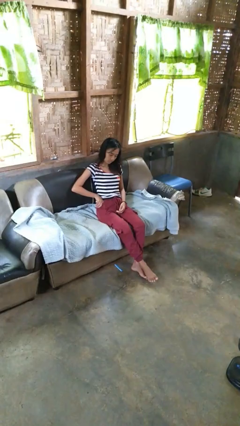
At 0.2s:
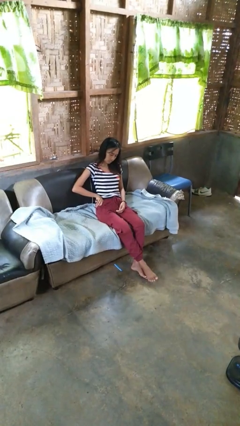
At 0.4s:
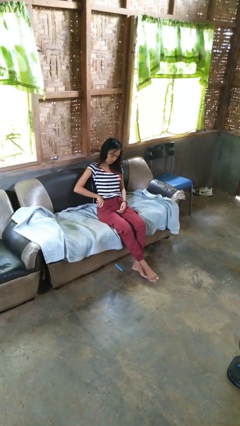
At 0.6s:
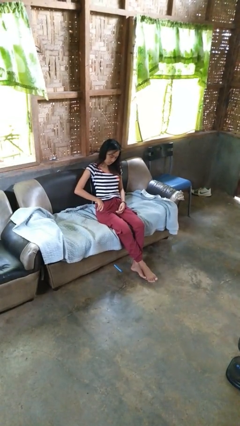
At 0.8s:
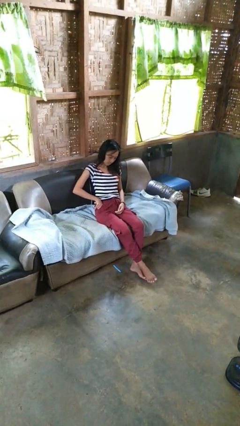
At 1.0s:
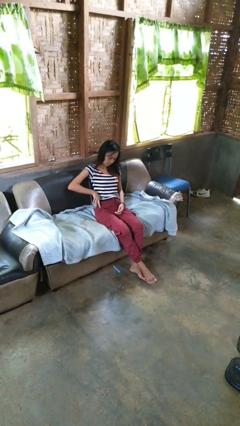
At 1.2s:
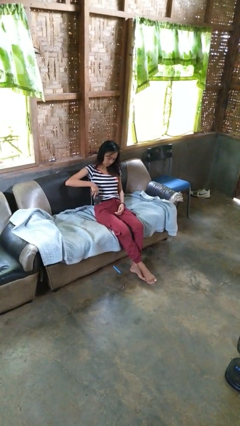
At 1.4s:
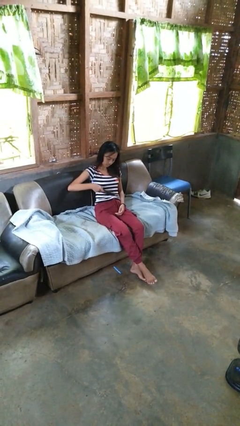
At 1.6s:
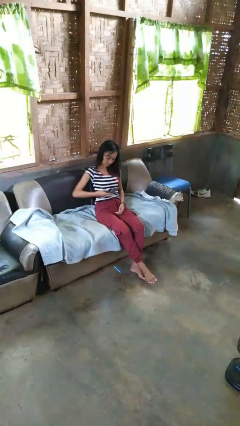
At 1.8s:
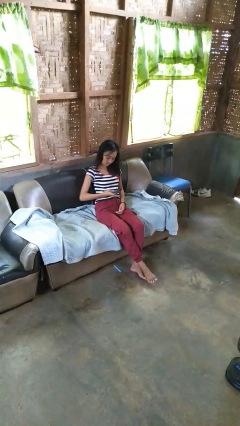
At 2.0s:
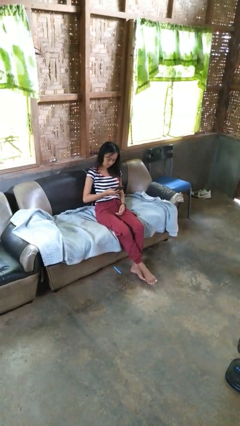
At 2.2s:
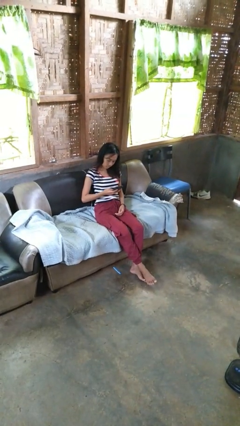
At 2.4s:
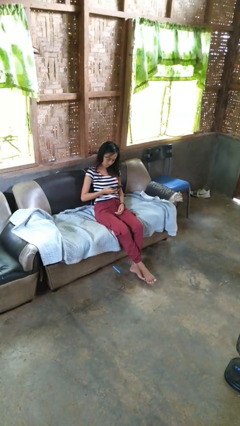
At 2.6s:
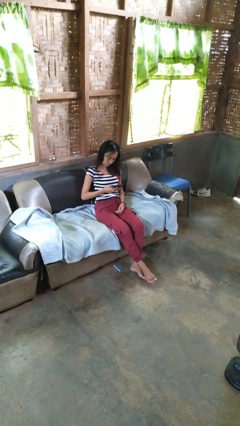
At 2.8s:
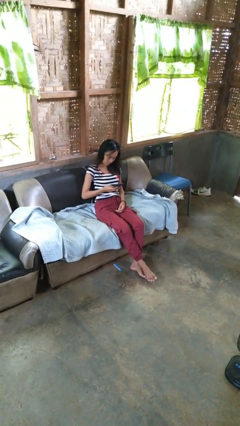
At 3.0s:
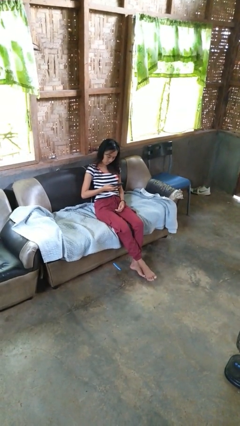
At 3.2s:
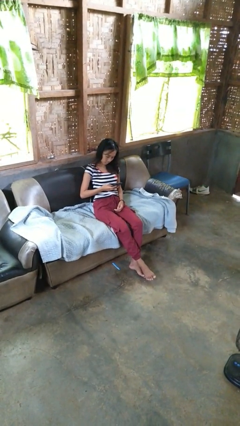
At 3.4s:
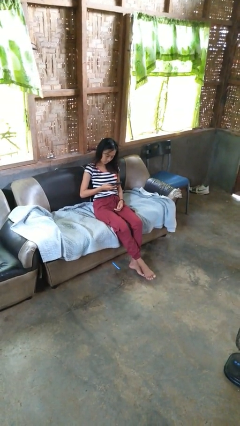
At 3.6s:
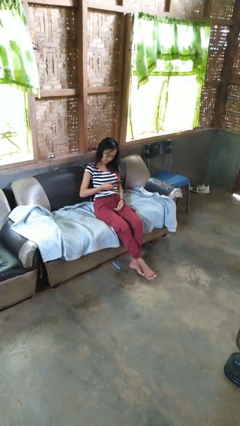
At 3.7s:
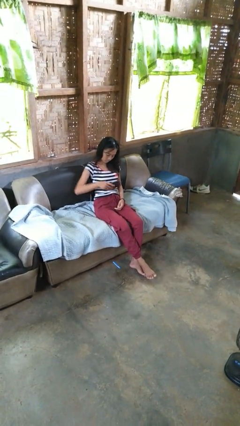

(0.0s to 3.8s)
person takes phone from pocket

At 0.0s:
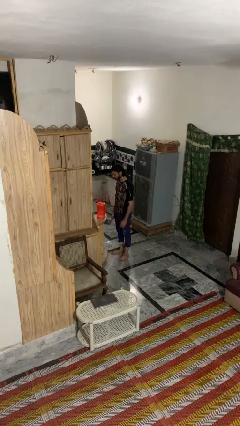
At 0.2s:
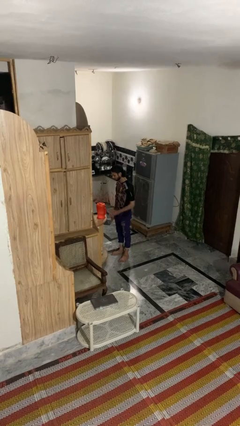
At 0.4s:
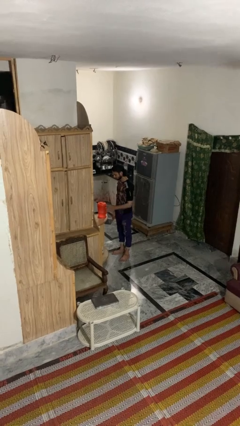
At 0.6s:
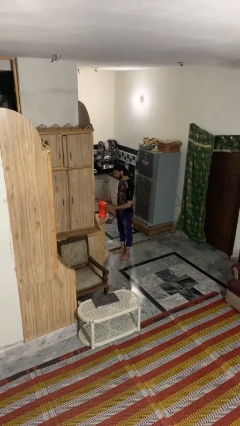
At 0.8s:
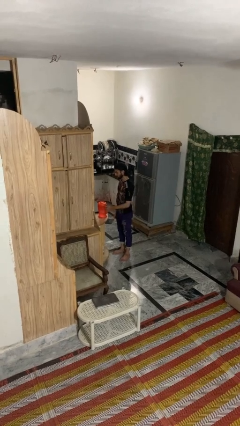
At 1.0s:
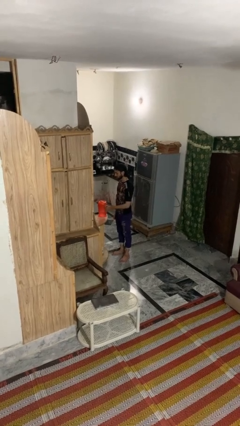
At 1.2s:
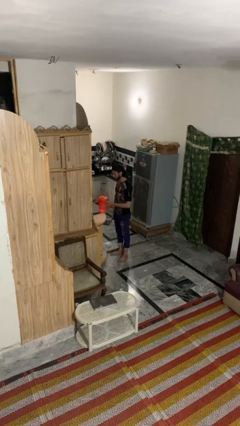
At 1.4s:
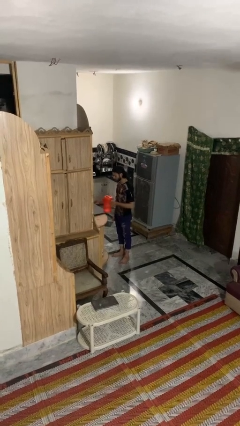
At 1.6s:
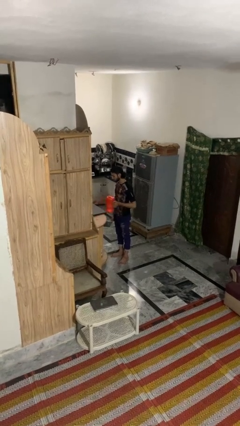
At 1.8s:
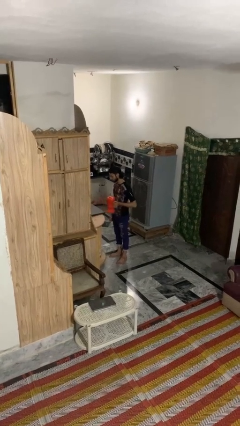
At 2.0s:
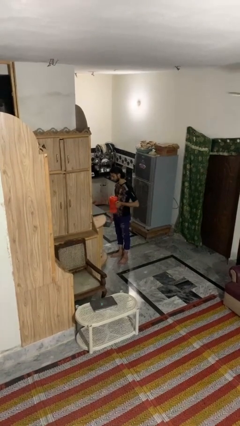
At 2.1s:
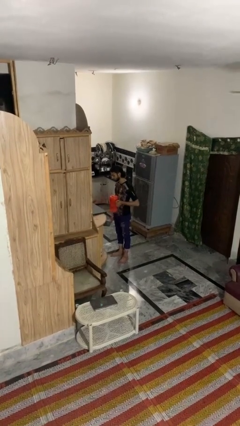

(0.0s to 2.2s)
person picks up object from countertop

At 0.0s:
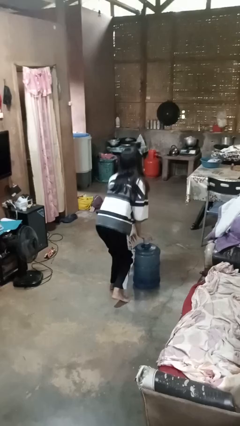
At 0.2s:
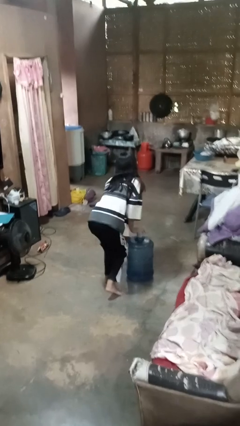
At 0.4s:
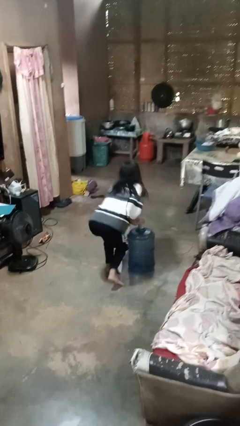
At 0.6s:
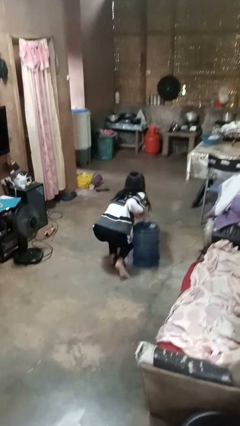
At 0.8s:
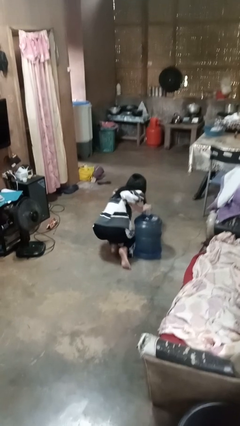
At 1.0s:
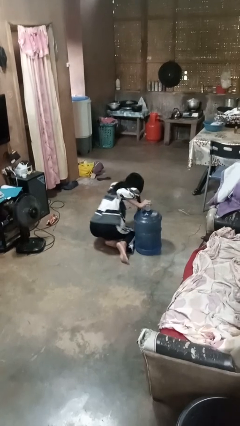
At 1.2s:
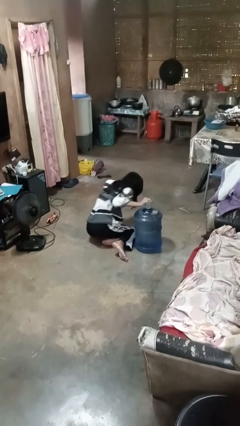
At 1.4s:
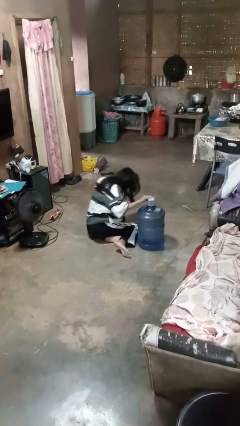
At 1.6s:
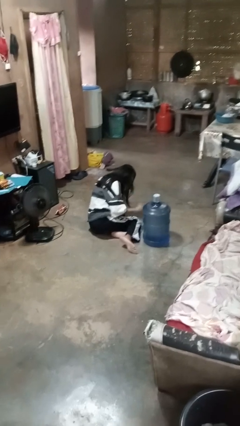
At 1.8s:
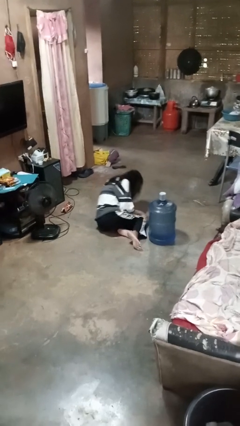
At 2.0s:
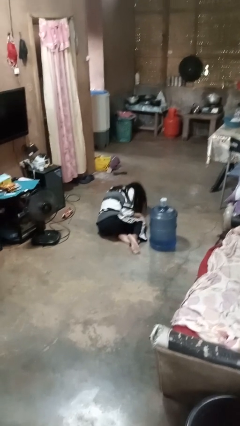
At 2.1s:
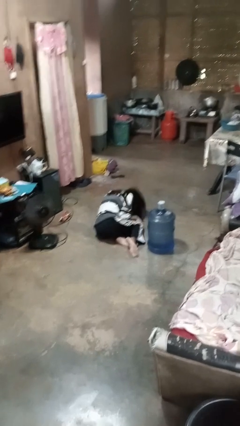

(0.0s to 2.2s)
person trips on object on floor

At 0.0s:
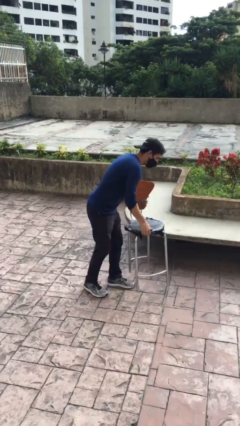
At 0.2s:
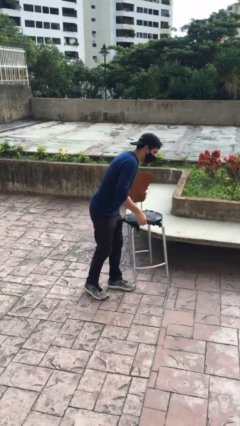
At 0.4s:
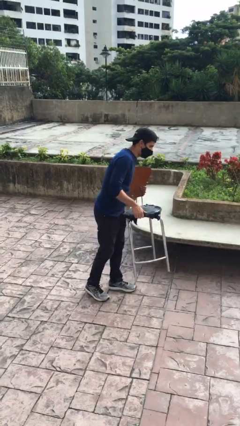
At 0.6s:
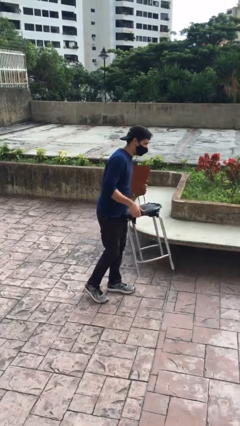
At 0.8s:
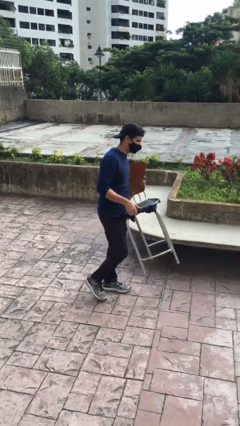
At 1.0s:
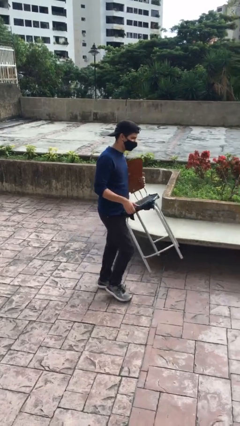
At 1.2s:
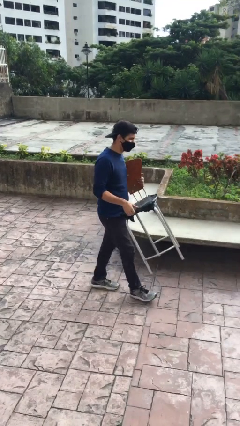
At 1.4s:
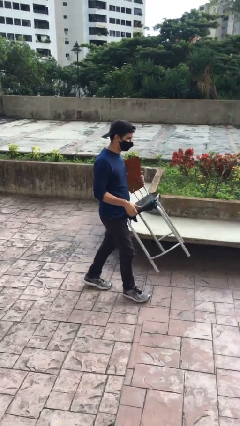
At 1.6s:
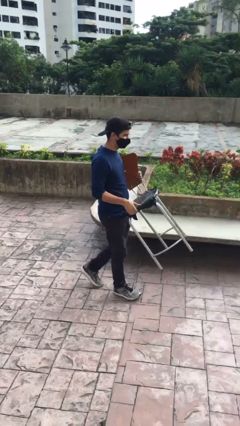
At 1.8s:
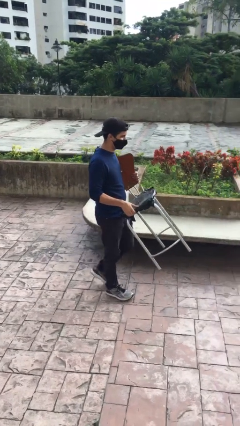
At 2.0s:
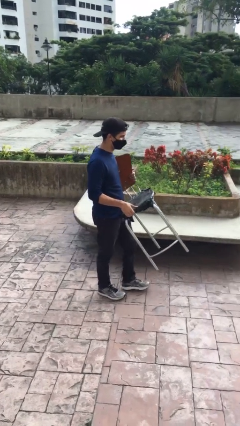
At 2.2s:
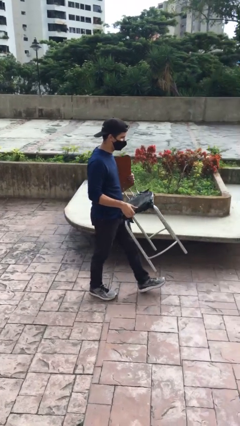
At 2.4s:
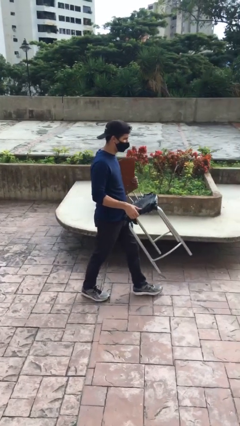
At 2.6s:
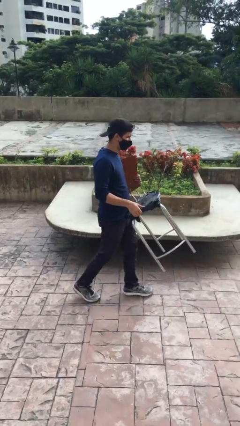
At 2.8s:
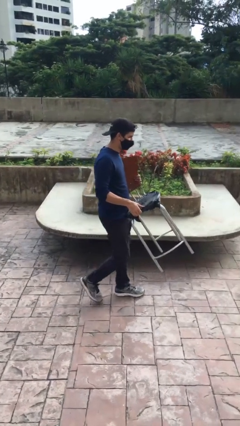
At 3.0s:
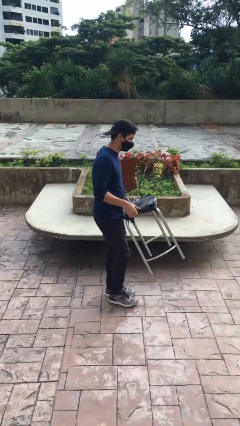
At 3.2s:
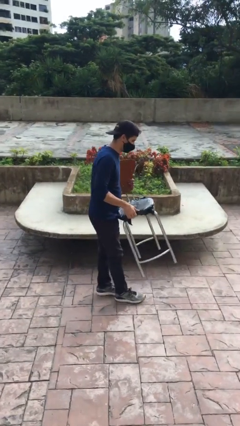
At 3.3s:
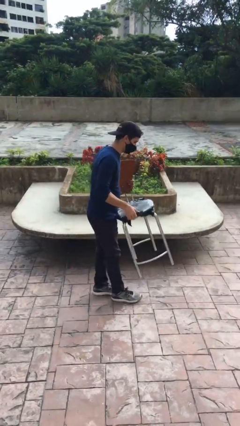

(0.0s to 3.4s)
person carries heavy object

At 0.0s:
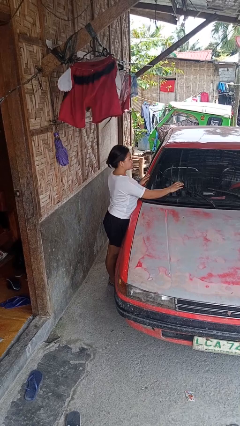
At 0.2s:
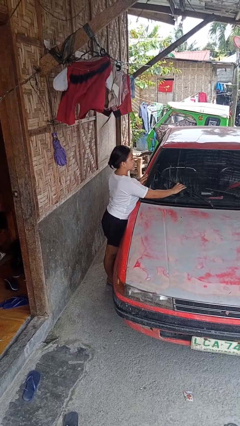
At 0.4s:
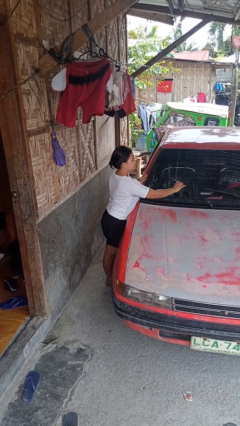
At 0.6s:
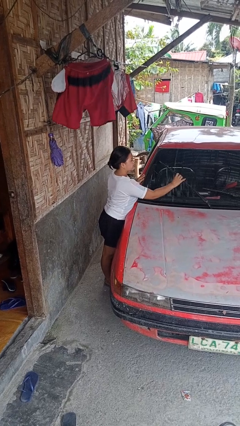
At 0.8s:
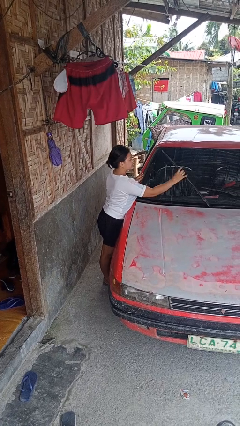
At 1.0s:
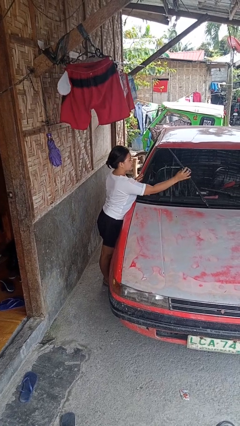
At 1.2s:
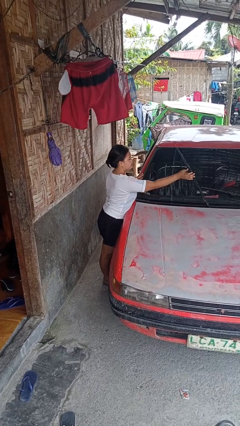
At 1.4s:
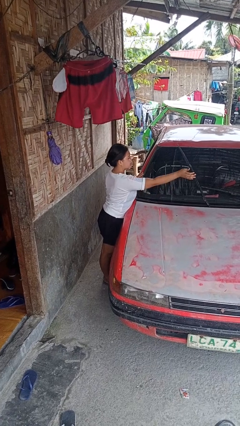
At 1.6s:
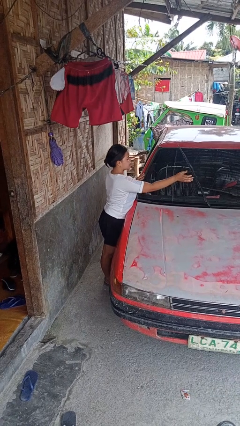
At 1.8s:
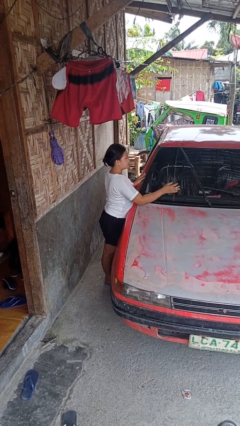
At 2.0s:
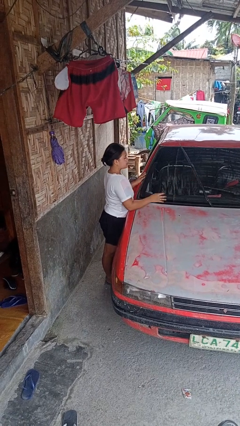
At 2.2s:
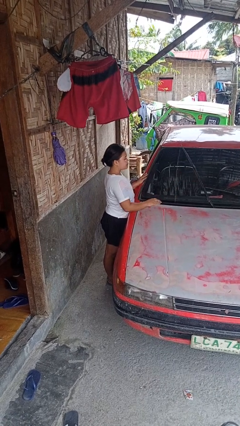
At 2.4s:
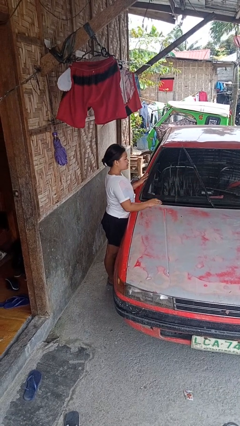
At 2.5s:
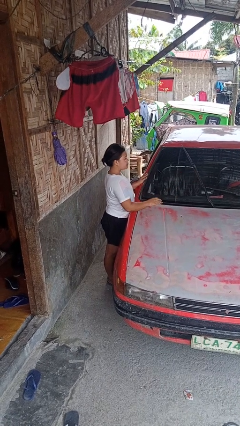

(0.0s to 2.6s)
person flips up car wipers

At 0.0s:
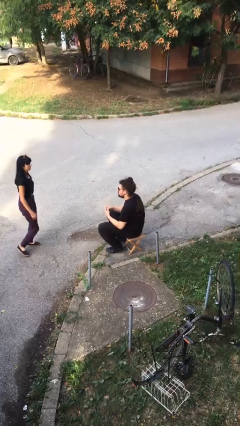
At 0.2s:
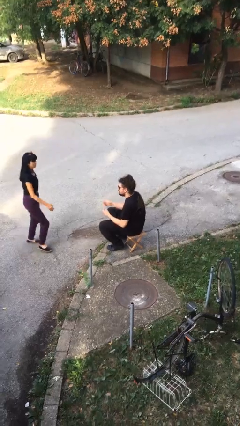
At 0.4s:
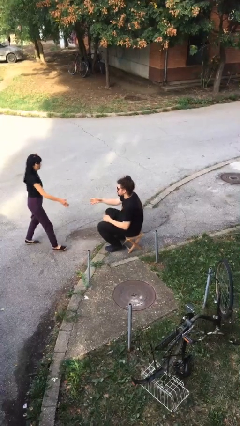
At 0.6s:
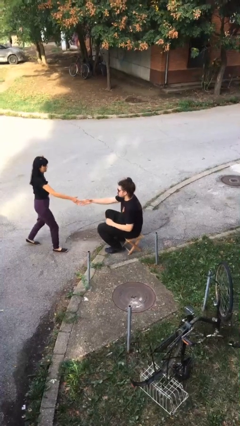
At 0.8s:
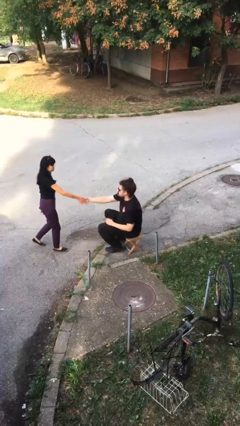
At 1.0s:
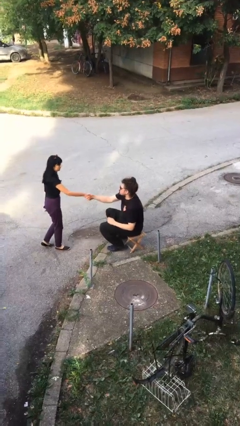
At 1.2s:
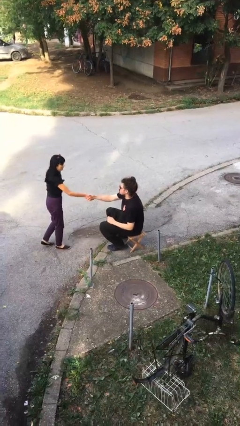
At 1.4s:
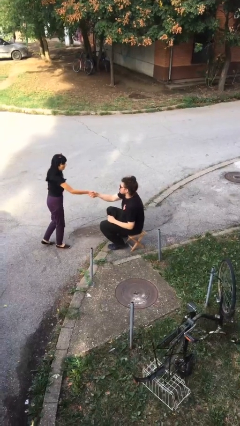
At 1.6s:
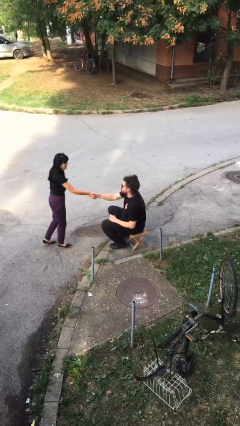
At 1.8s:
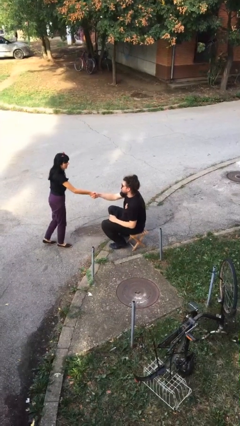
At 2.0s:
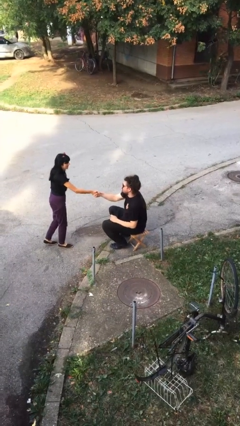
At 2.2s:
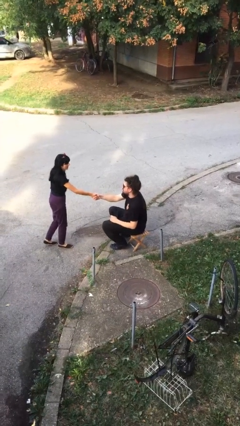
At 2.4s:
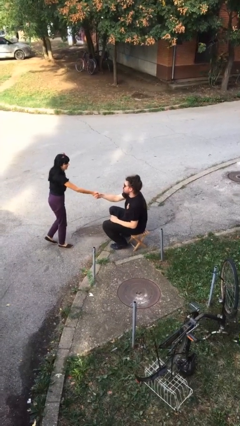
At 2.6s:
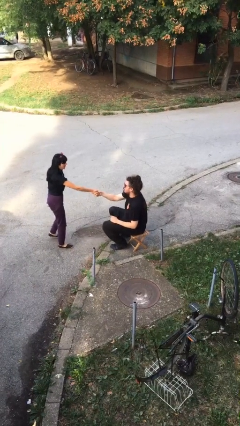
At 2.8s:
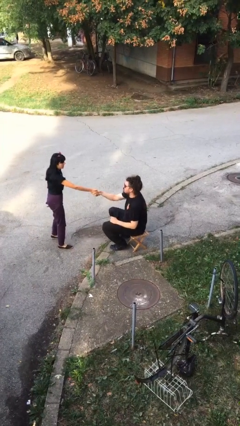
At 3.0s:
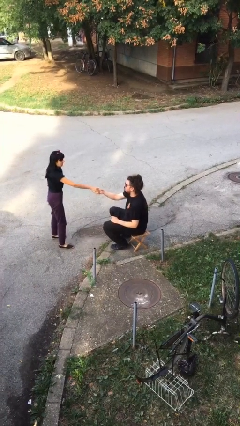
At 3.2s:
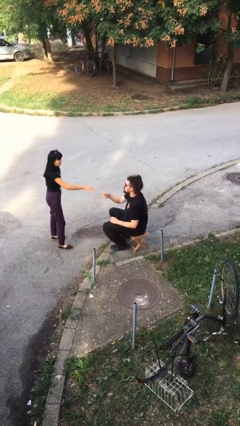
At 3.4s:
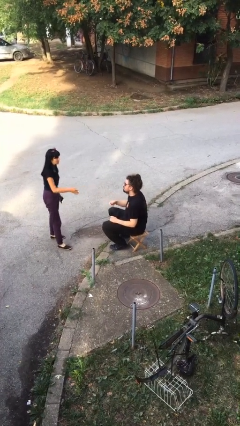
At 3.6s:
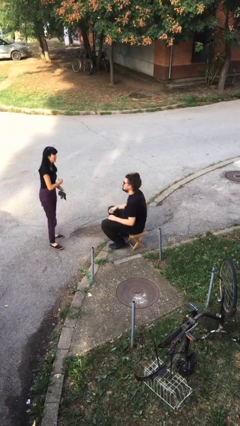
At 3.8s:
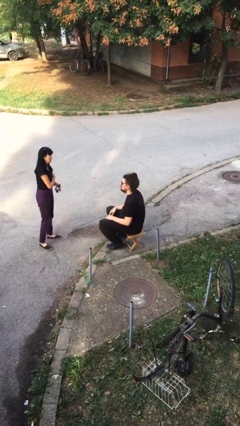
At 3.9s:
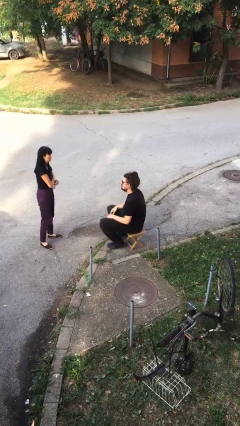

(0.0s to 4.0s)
person shakes hand
